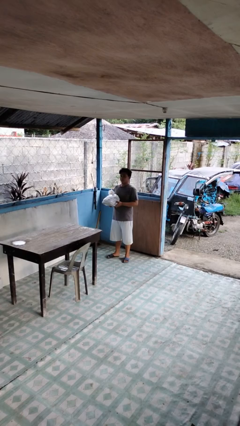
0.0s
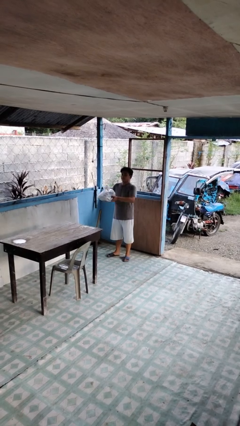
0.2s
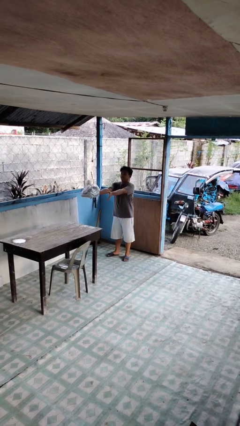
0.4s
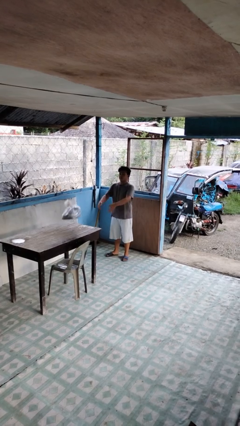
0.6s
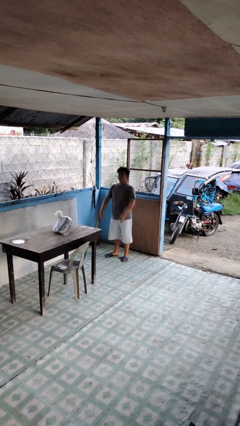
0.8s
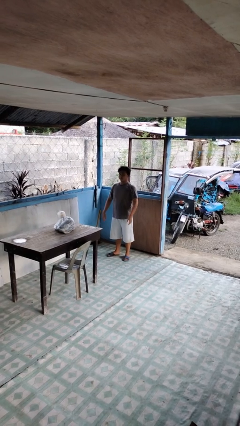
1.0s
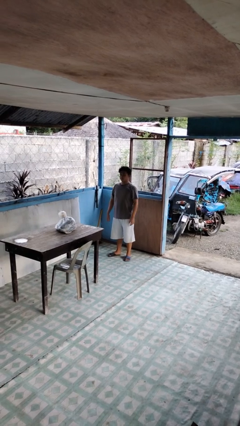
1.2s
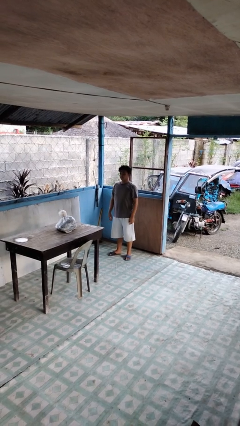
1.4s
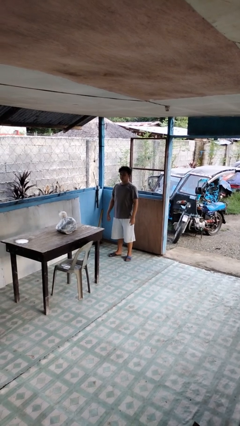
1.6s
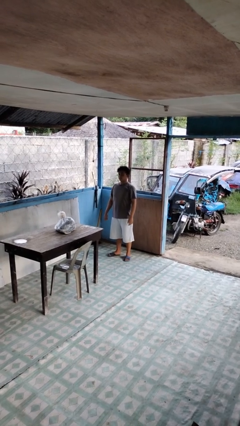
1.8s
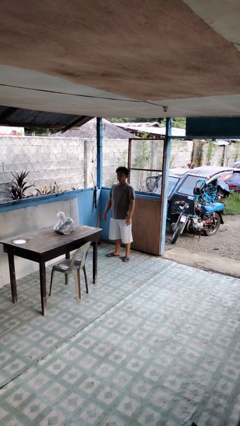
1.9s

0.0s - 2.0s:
person throws object on table

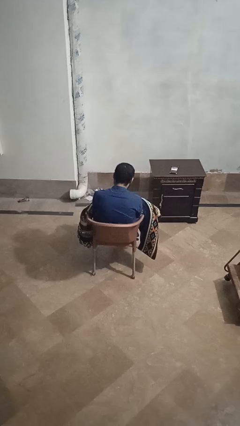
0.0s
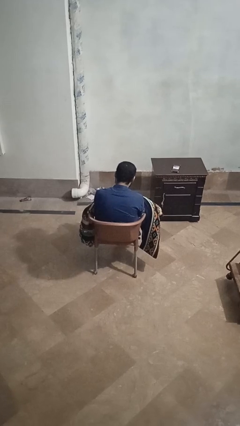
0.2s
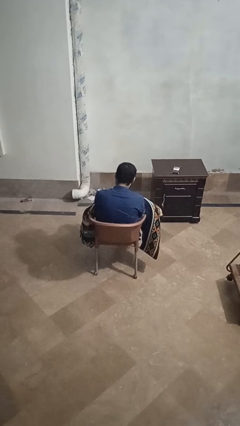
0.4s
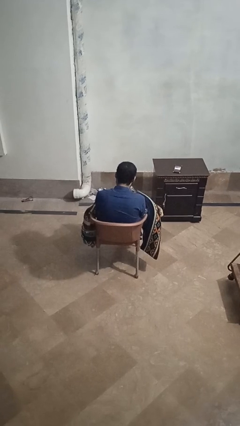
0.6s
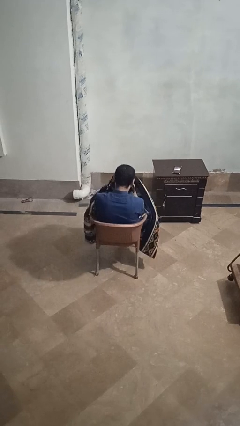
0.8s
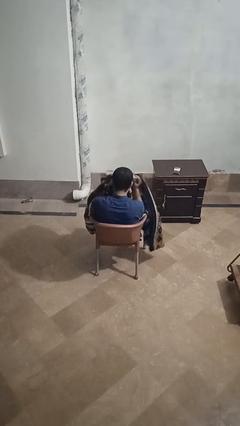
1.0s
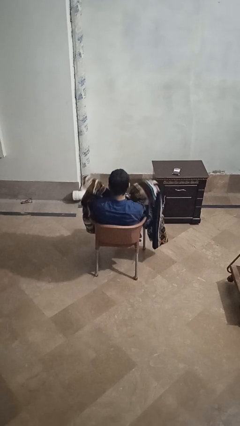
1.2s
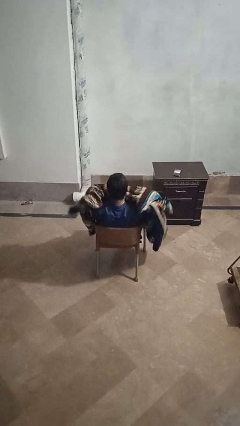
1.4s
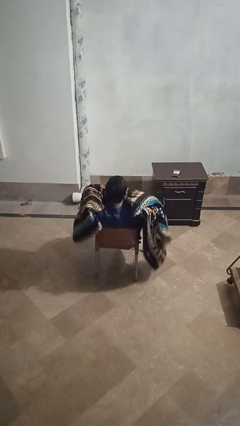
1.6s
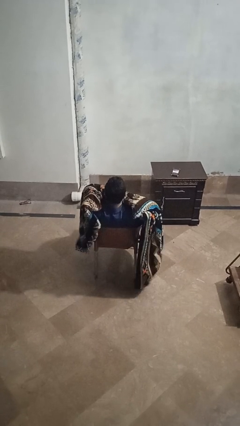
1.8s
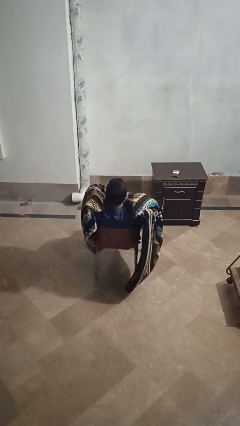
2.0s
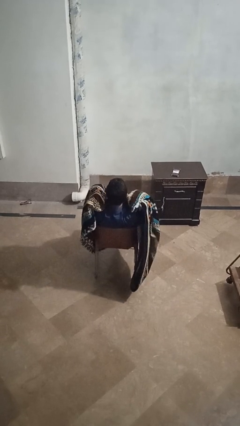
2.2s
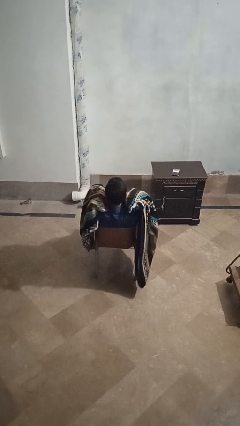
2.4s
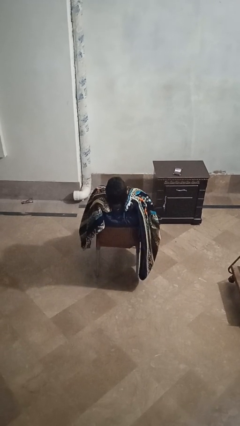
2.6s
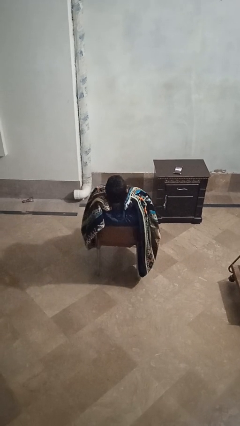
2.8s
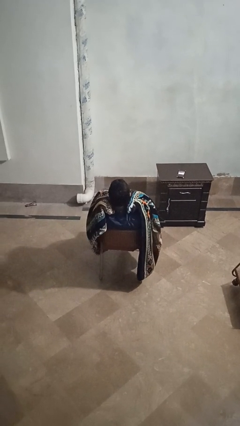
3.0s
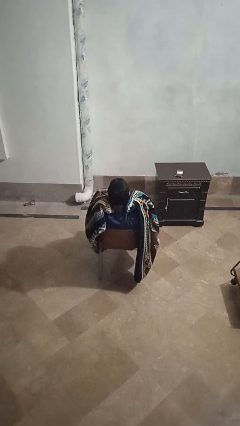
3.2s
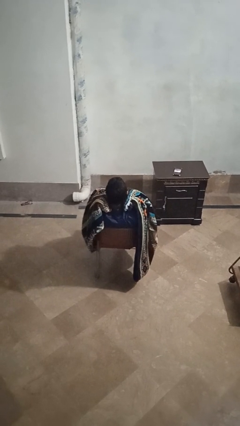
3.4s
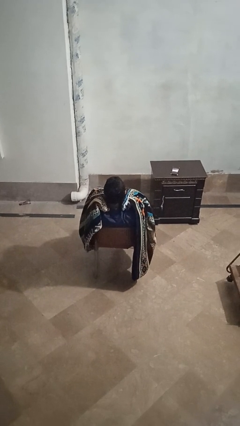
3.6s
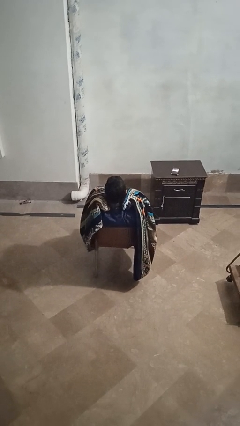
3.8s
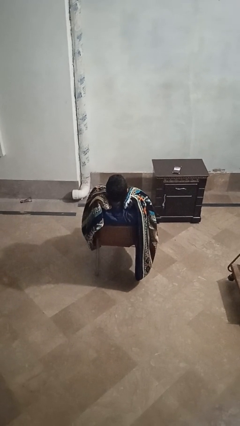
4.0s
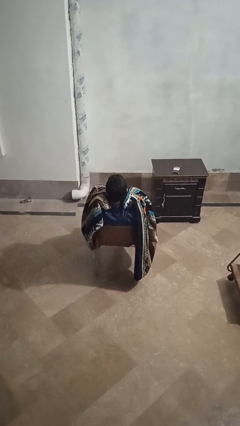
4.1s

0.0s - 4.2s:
person covers with blanket

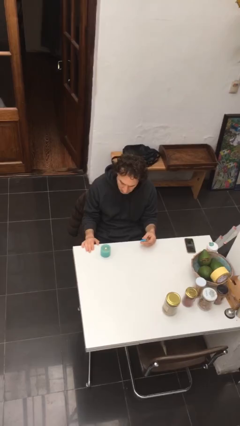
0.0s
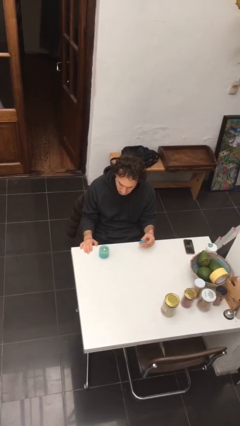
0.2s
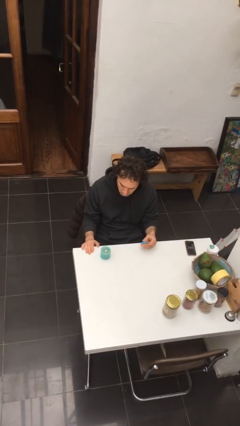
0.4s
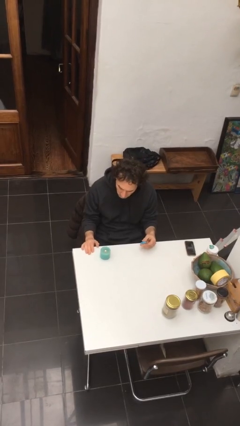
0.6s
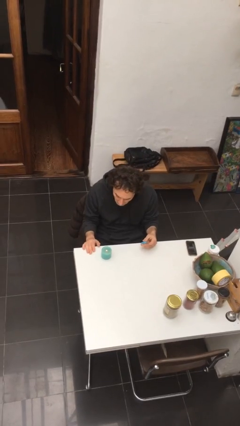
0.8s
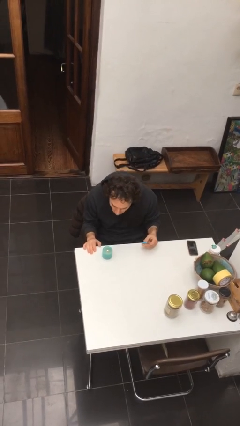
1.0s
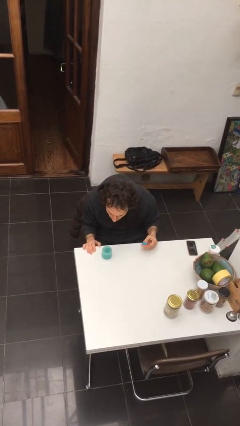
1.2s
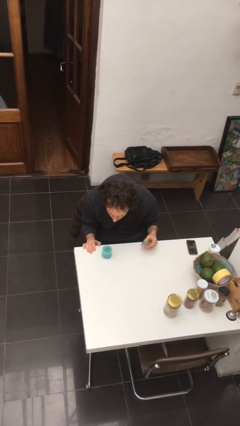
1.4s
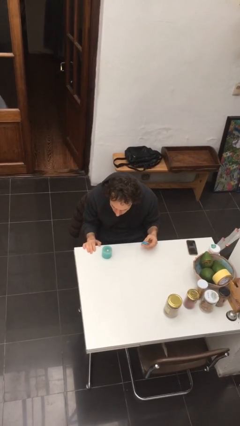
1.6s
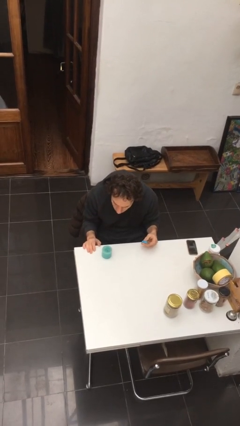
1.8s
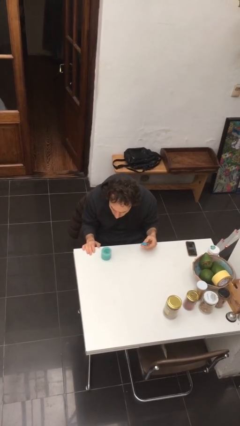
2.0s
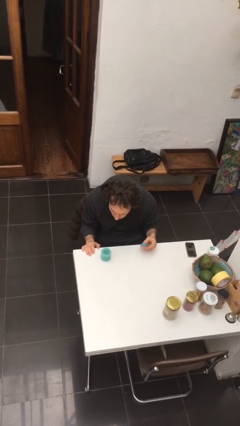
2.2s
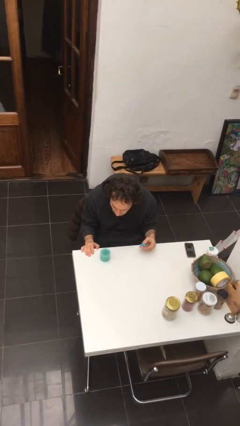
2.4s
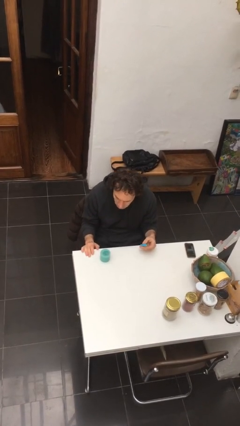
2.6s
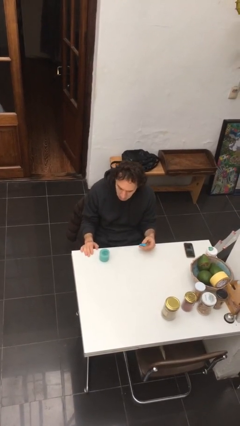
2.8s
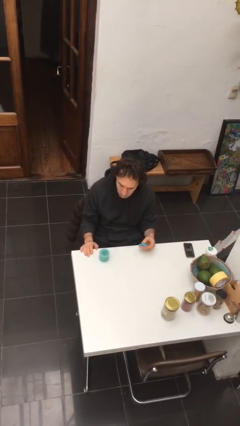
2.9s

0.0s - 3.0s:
person extinguishes candle

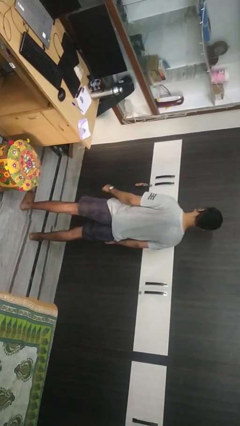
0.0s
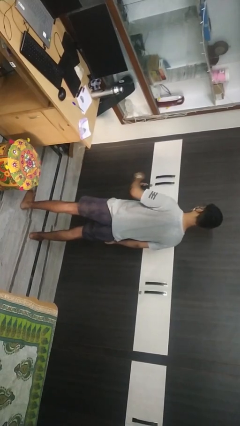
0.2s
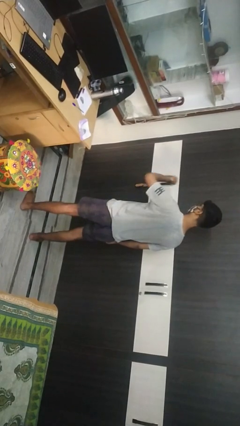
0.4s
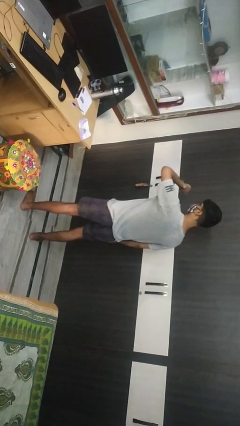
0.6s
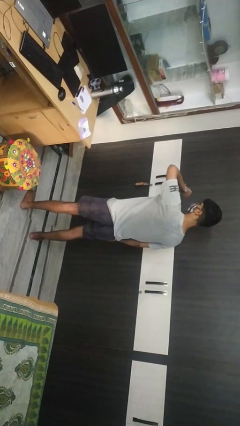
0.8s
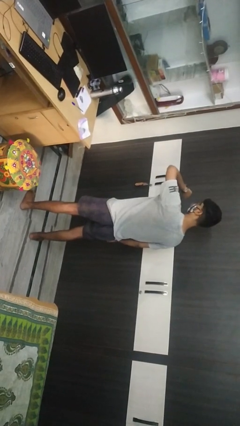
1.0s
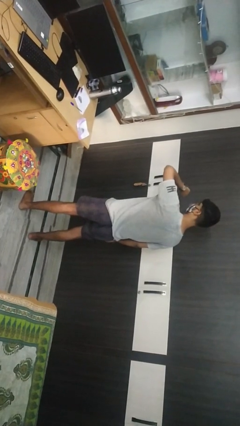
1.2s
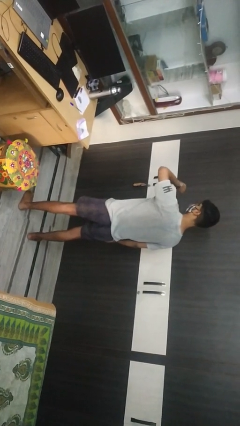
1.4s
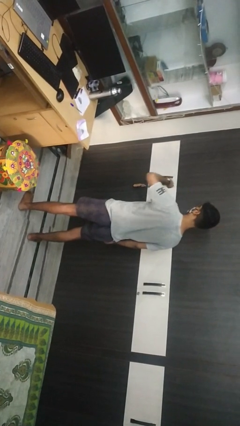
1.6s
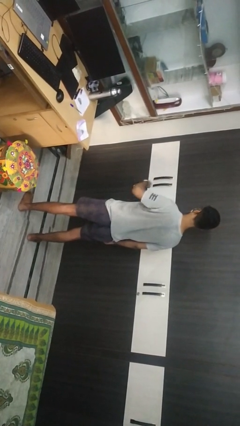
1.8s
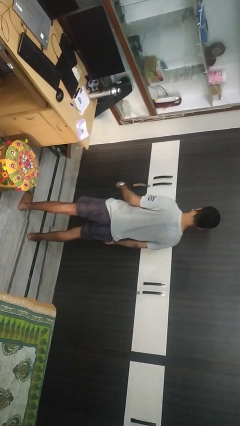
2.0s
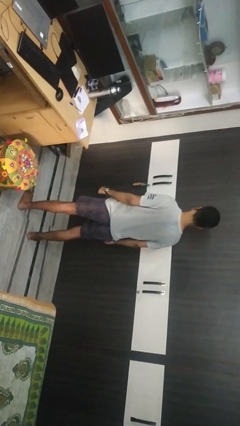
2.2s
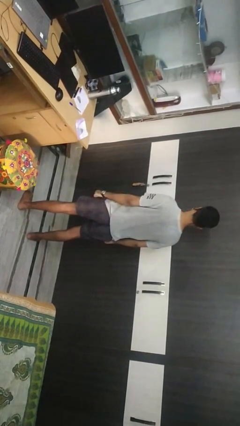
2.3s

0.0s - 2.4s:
person looks at wristwatch

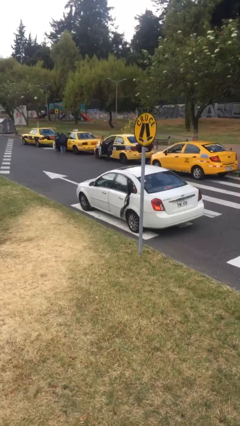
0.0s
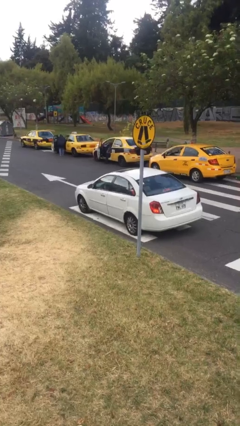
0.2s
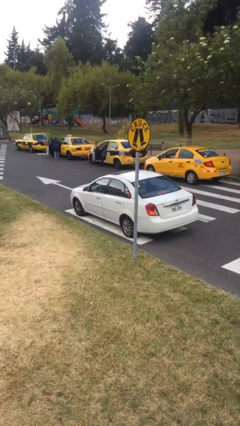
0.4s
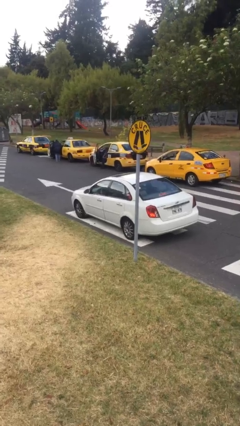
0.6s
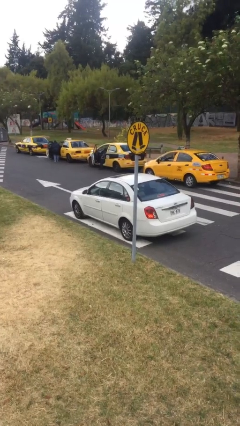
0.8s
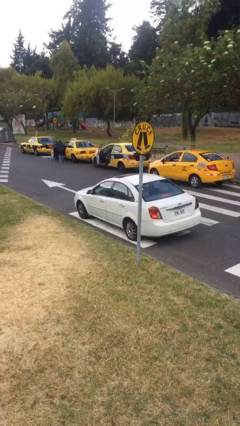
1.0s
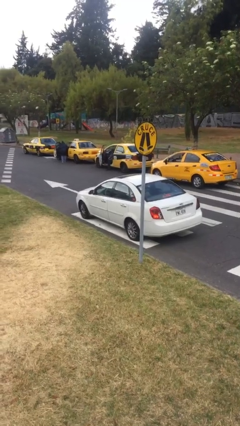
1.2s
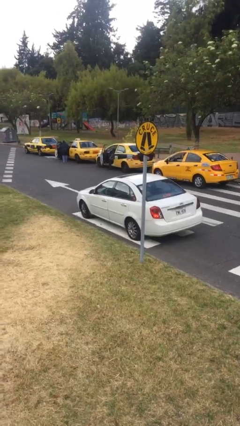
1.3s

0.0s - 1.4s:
car picks up person

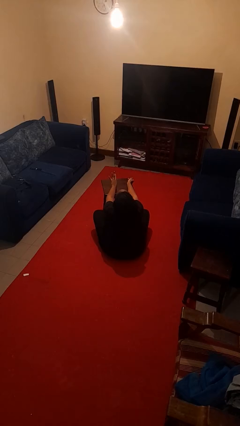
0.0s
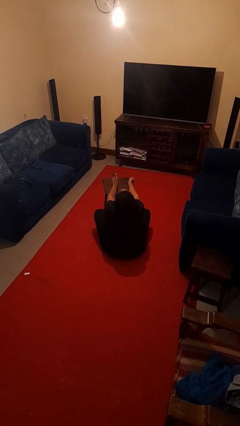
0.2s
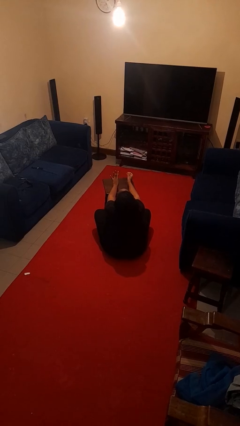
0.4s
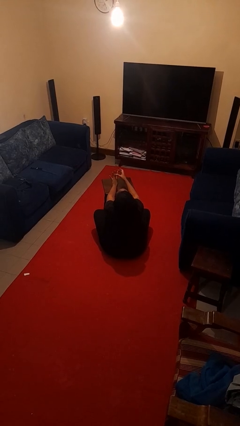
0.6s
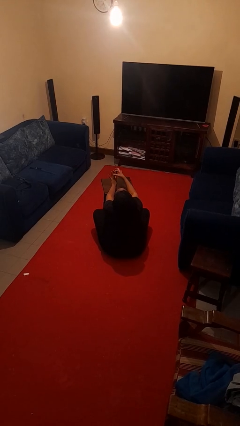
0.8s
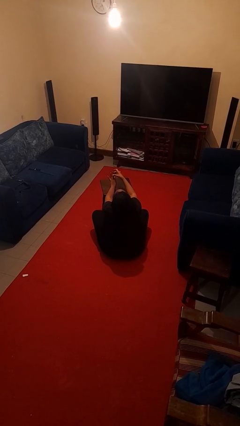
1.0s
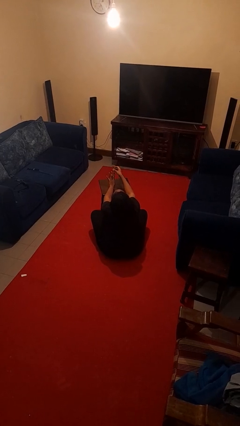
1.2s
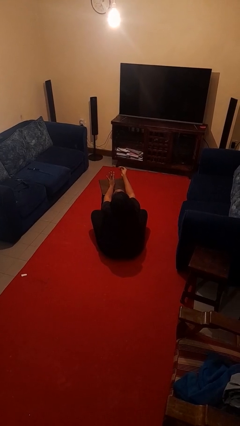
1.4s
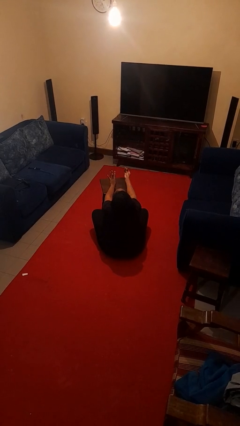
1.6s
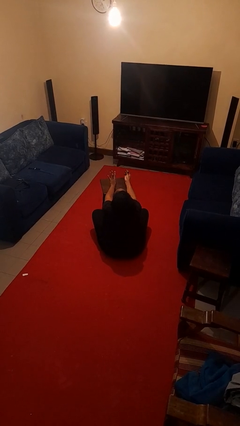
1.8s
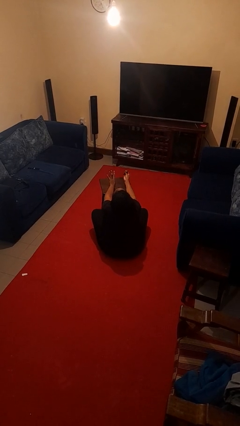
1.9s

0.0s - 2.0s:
person takes off ring

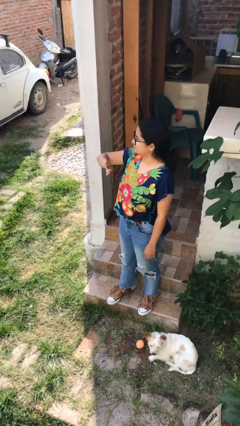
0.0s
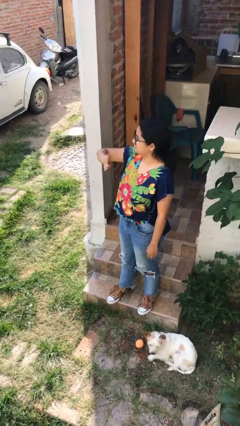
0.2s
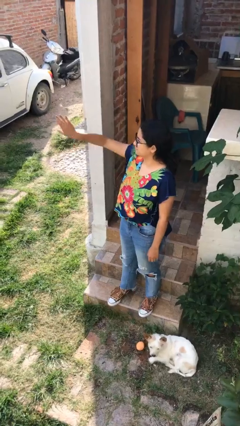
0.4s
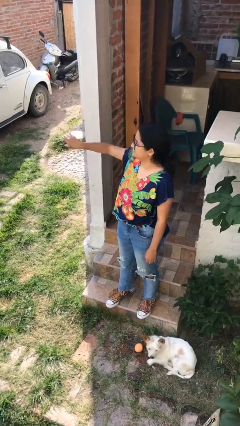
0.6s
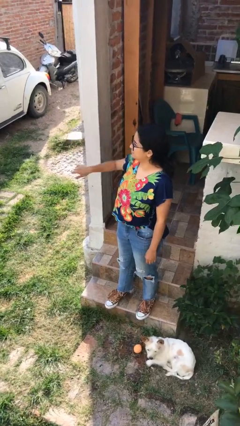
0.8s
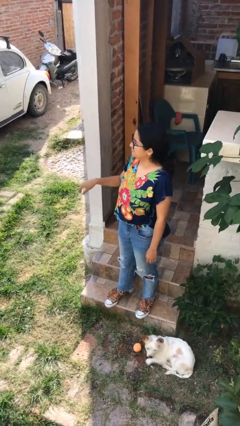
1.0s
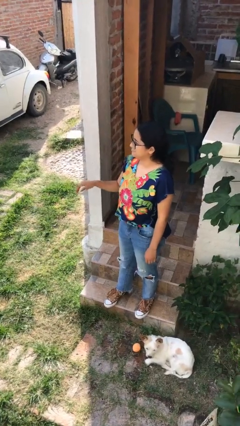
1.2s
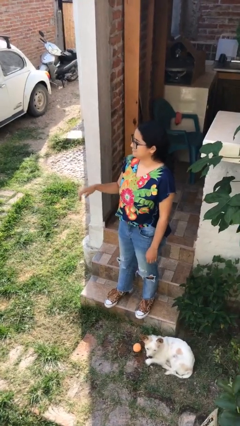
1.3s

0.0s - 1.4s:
person gestures swipe right

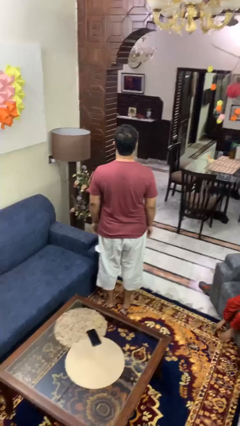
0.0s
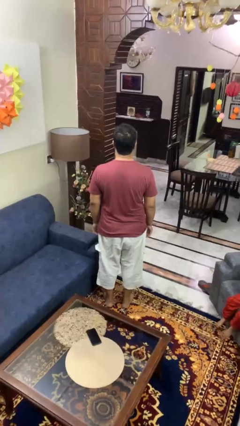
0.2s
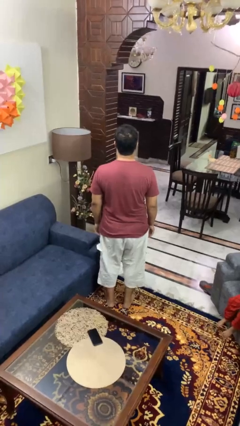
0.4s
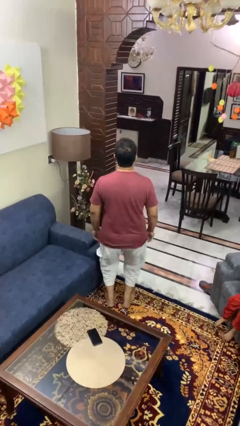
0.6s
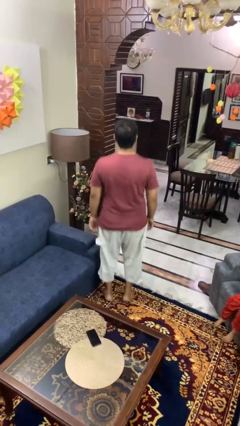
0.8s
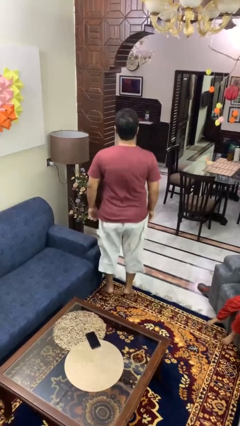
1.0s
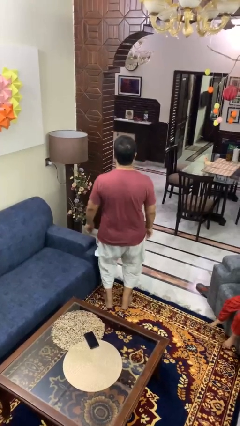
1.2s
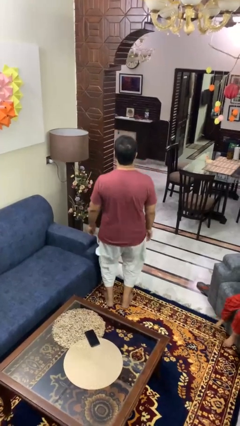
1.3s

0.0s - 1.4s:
person jumps
